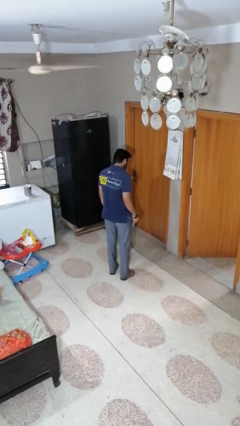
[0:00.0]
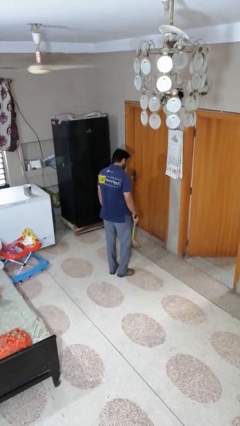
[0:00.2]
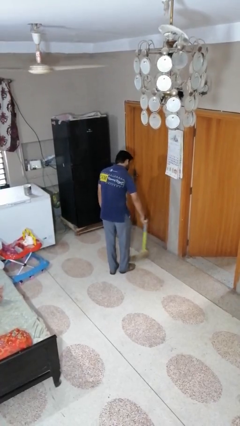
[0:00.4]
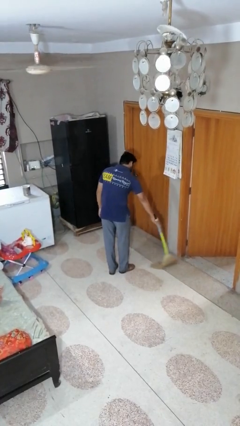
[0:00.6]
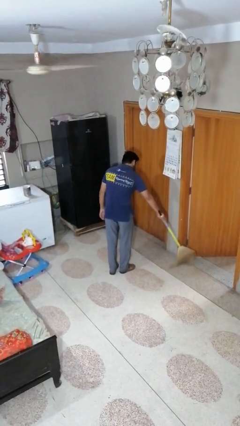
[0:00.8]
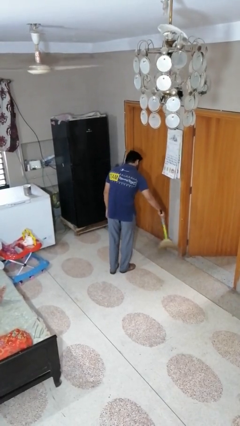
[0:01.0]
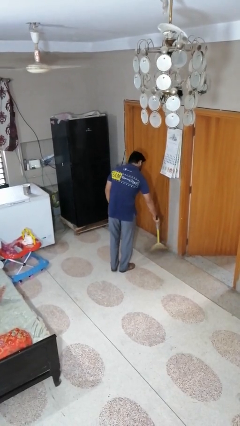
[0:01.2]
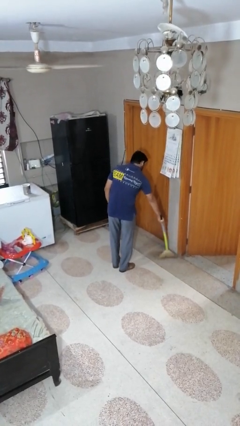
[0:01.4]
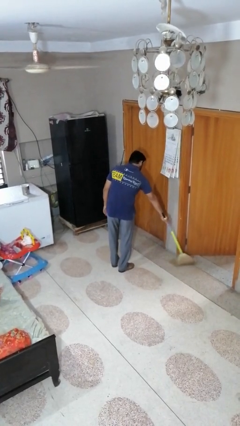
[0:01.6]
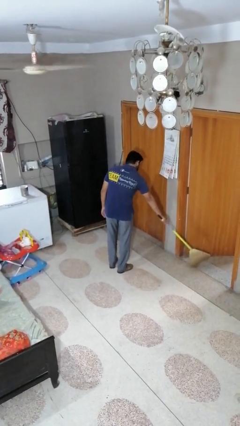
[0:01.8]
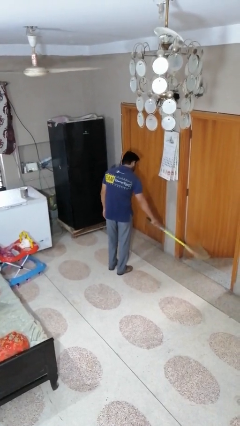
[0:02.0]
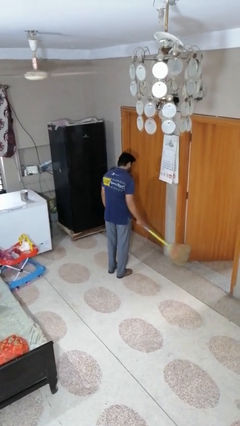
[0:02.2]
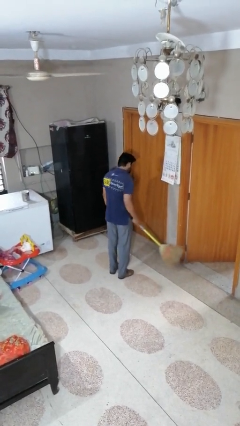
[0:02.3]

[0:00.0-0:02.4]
person sweeps floor

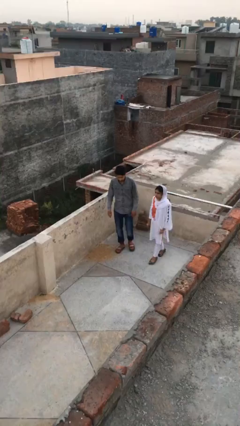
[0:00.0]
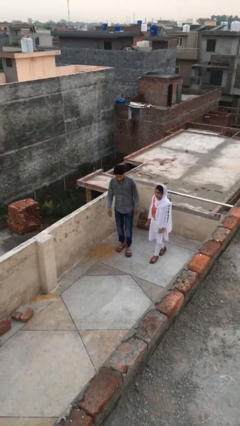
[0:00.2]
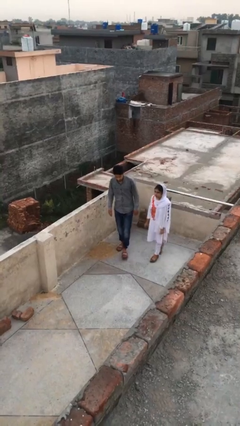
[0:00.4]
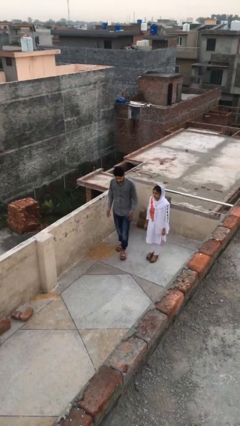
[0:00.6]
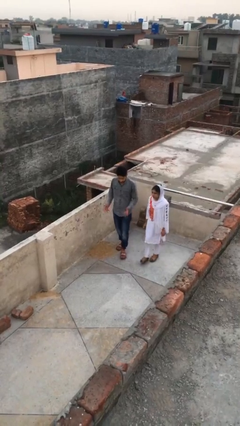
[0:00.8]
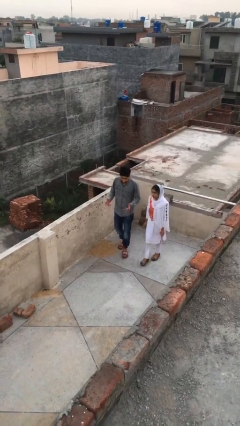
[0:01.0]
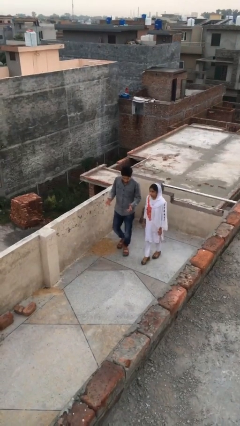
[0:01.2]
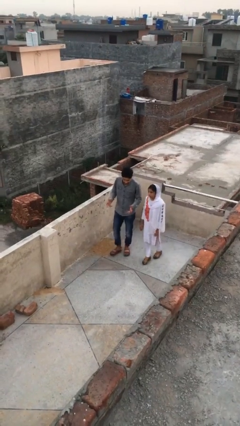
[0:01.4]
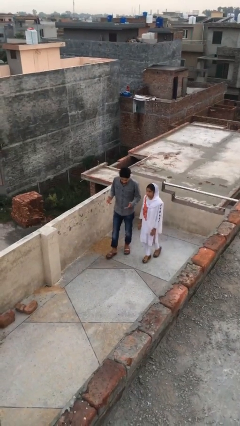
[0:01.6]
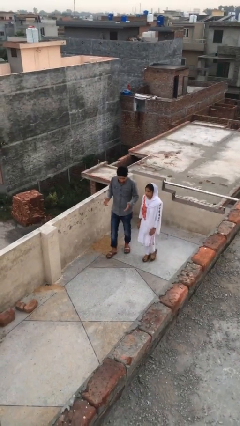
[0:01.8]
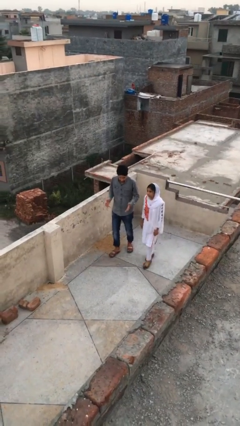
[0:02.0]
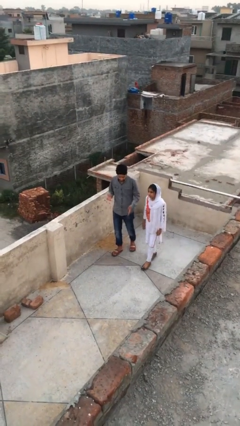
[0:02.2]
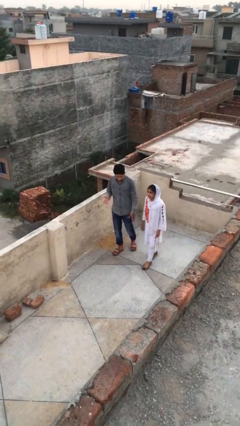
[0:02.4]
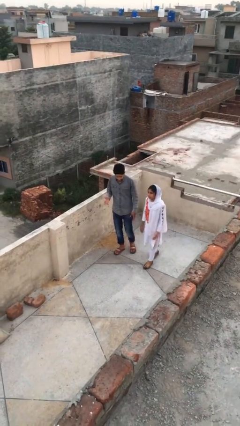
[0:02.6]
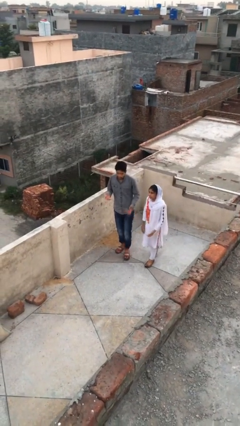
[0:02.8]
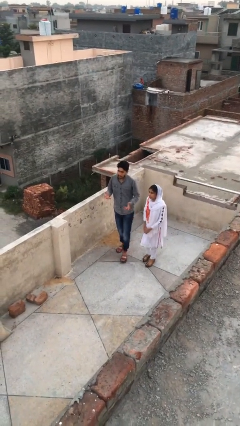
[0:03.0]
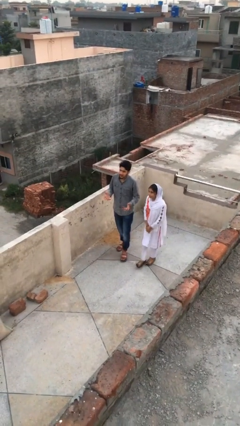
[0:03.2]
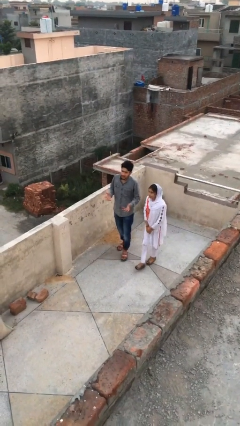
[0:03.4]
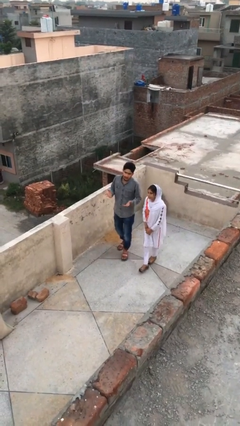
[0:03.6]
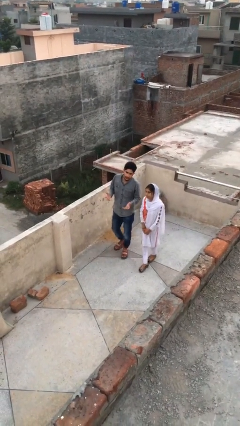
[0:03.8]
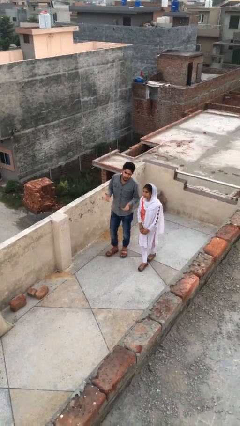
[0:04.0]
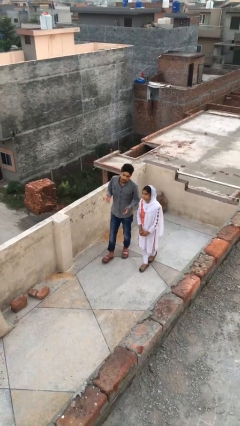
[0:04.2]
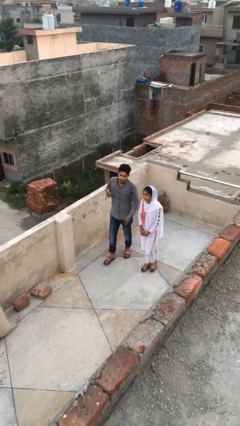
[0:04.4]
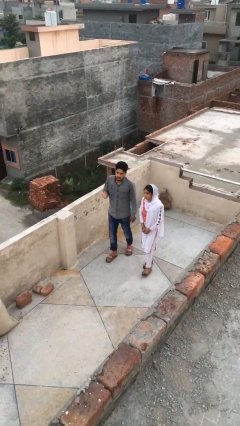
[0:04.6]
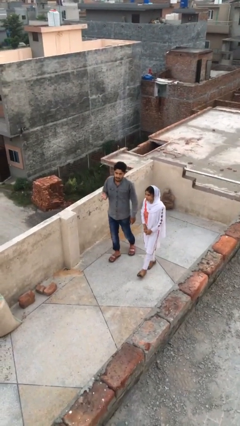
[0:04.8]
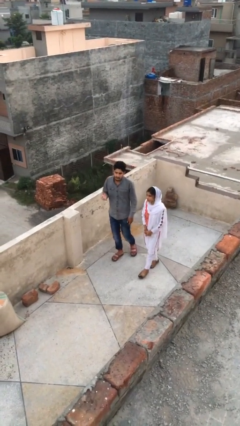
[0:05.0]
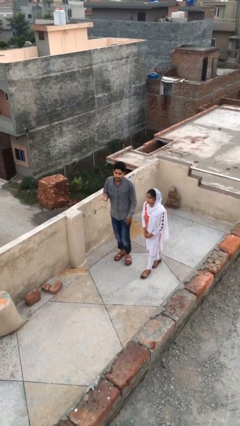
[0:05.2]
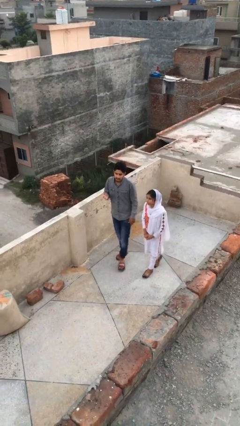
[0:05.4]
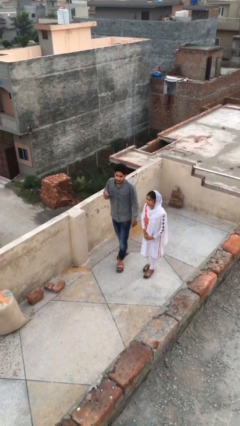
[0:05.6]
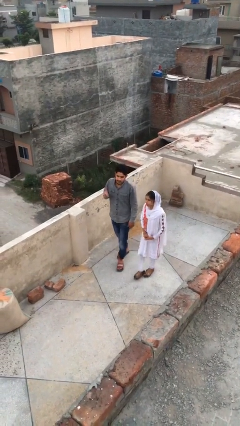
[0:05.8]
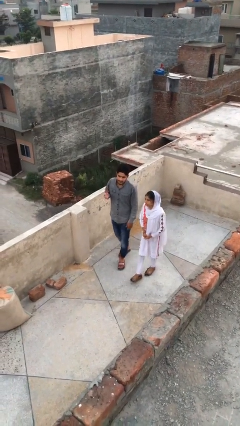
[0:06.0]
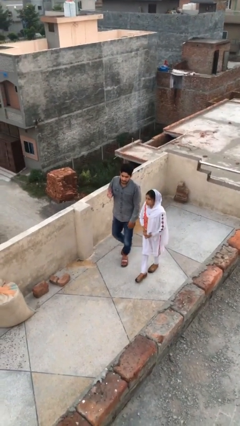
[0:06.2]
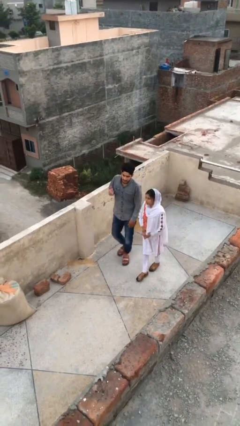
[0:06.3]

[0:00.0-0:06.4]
person talks to person

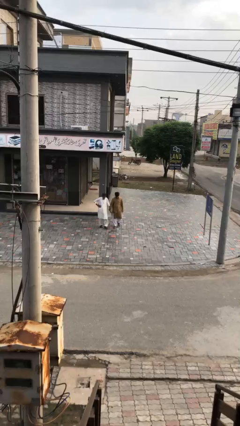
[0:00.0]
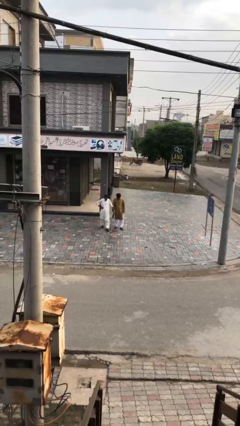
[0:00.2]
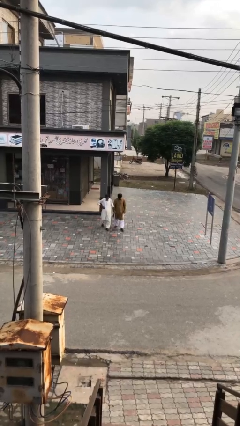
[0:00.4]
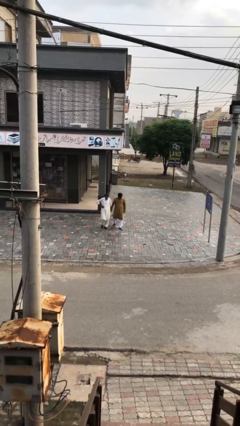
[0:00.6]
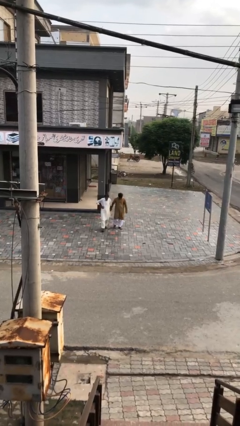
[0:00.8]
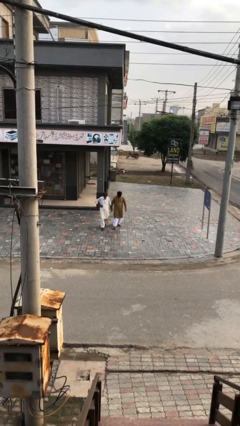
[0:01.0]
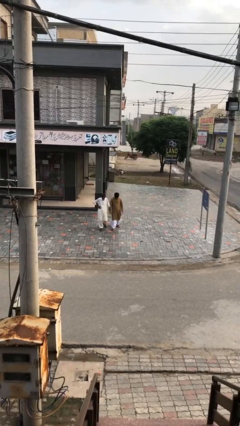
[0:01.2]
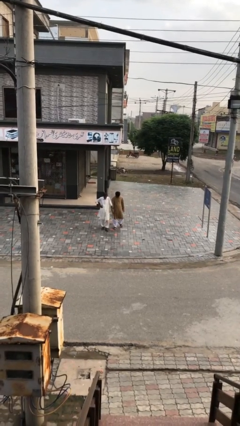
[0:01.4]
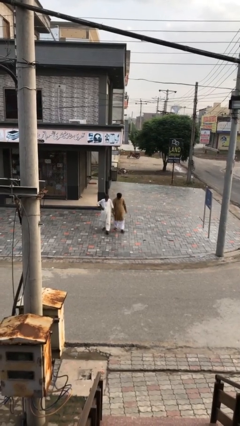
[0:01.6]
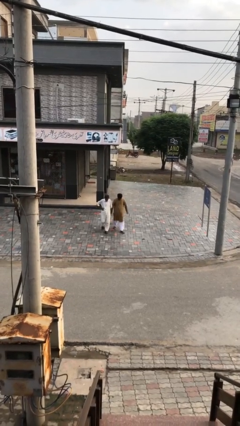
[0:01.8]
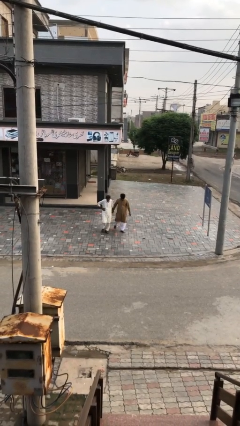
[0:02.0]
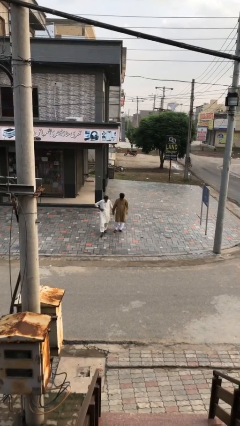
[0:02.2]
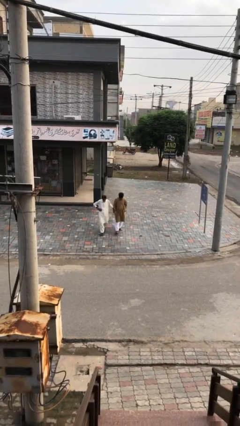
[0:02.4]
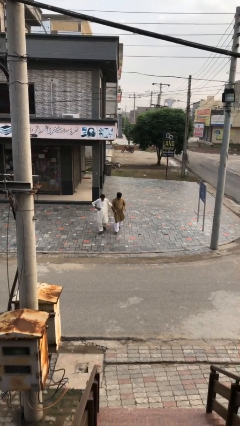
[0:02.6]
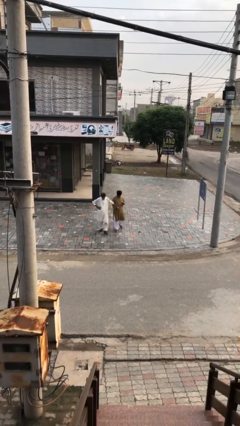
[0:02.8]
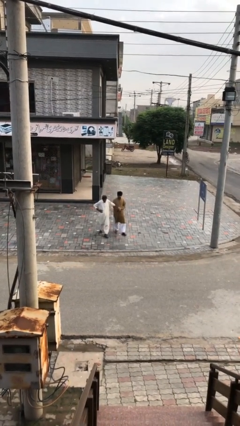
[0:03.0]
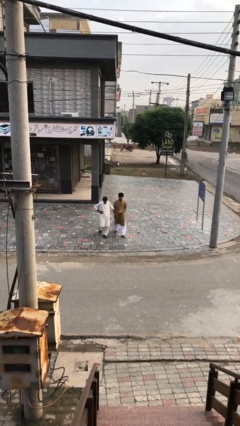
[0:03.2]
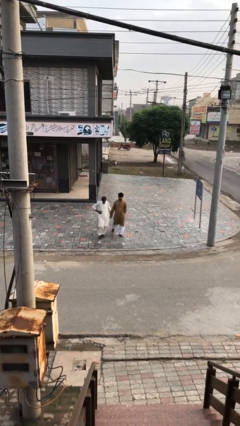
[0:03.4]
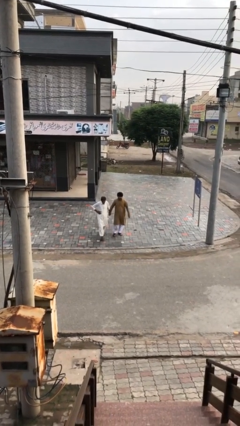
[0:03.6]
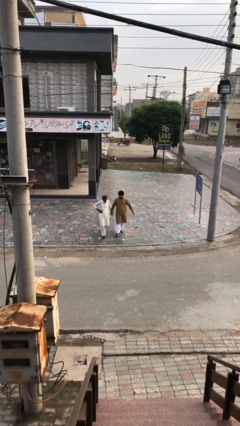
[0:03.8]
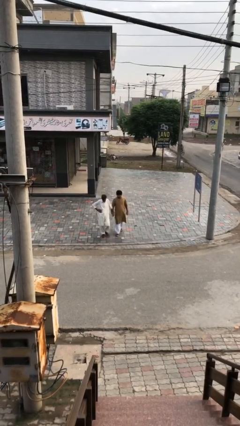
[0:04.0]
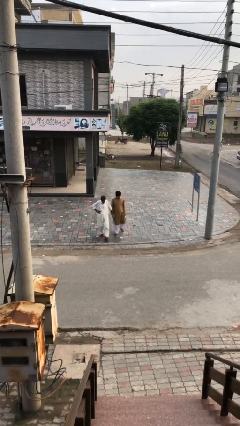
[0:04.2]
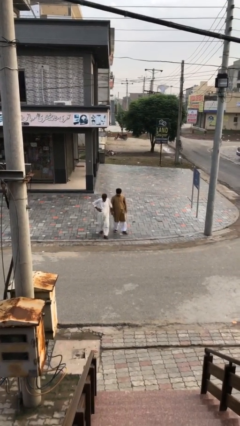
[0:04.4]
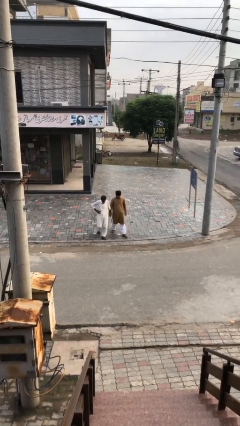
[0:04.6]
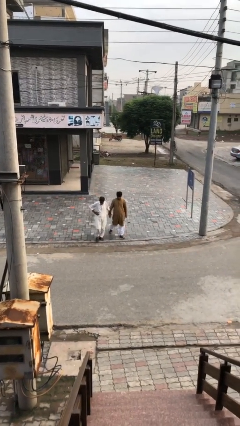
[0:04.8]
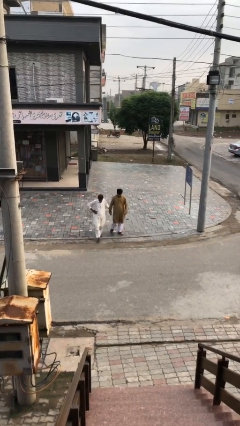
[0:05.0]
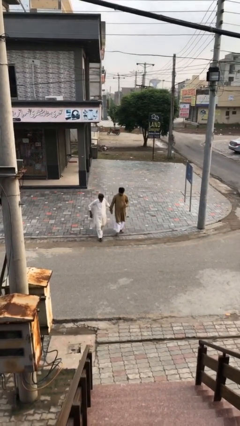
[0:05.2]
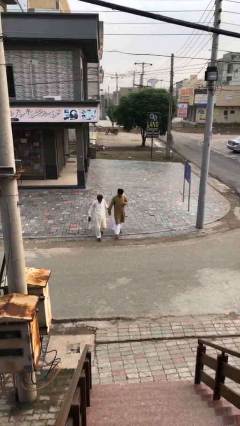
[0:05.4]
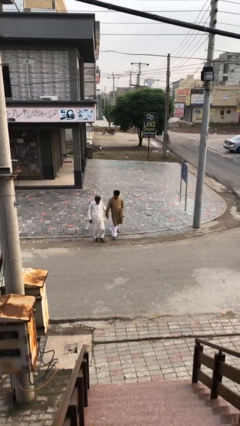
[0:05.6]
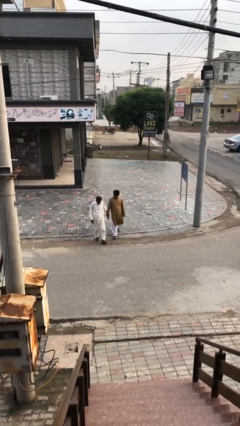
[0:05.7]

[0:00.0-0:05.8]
person holds hand

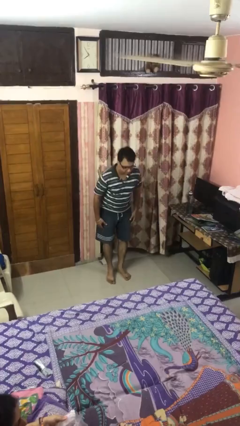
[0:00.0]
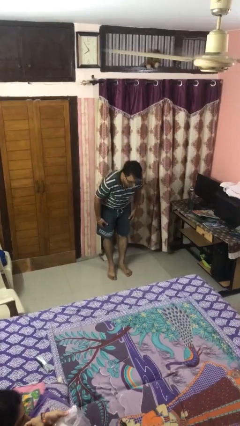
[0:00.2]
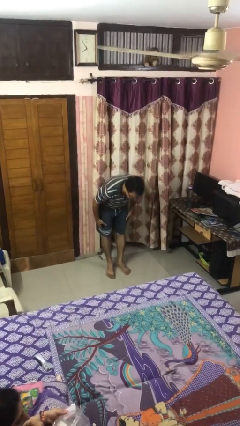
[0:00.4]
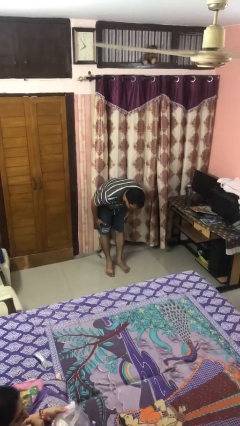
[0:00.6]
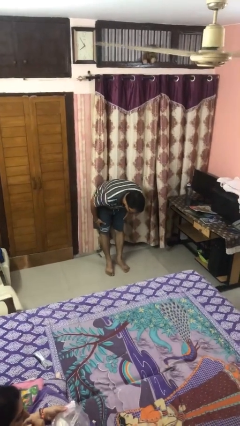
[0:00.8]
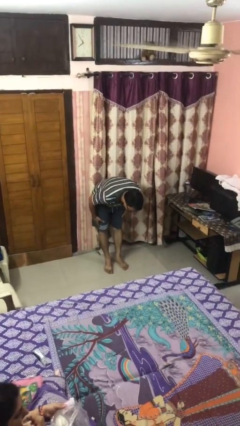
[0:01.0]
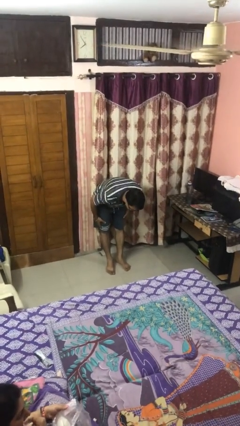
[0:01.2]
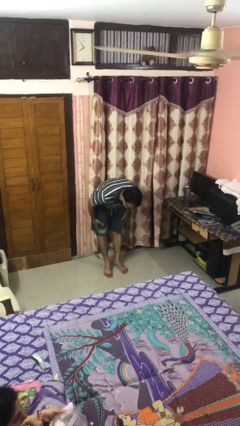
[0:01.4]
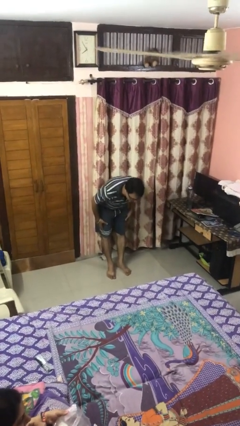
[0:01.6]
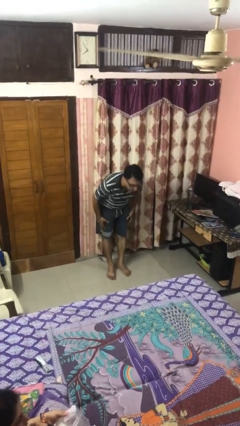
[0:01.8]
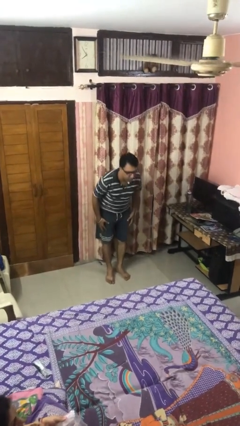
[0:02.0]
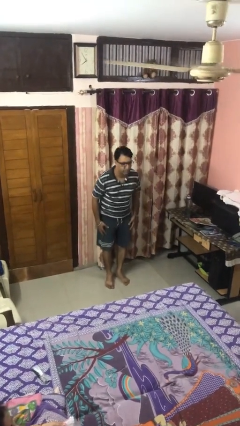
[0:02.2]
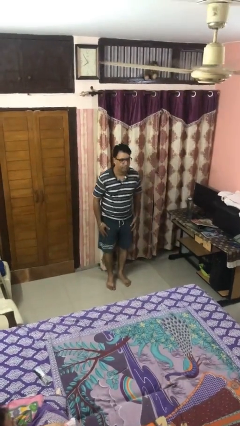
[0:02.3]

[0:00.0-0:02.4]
person bows

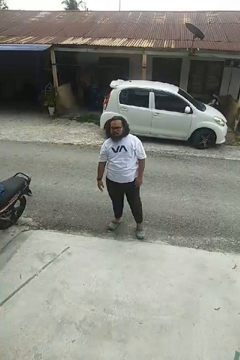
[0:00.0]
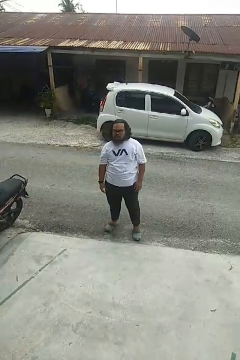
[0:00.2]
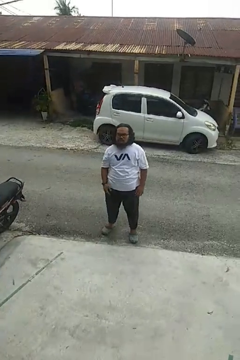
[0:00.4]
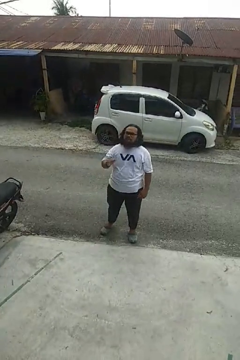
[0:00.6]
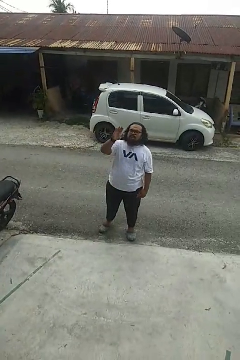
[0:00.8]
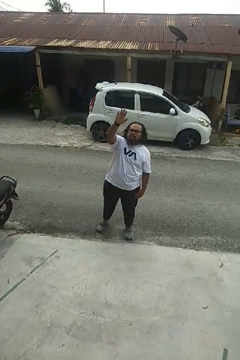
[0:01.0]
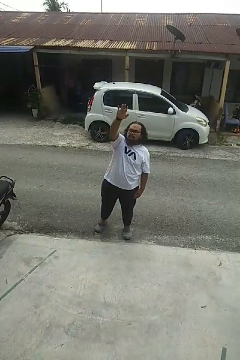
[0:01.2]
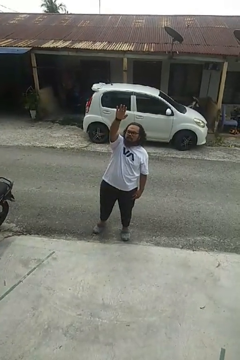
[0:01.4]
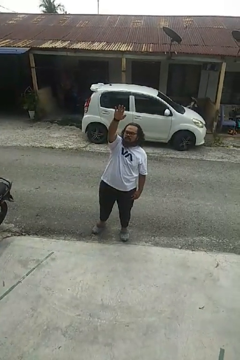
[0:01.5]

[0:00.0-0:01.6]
person gestures raise hand
